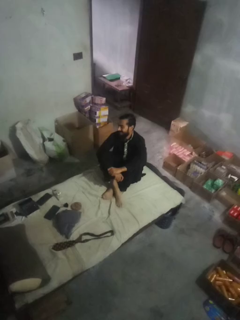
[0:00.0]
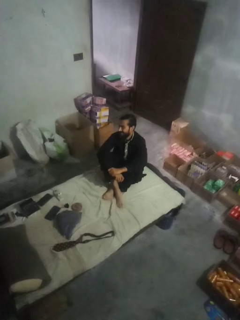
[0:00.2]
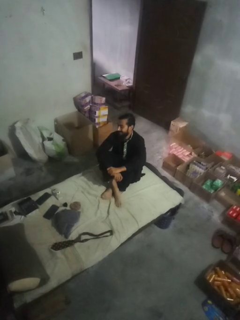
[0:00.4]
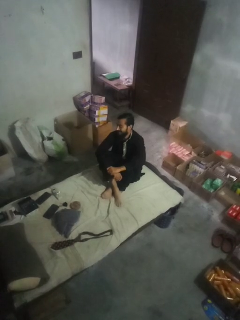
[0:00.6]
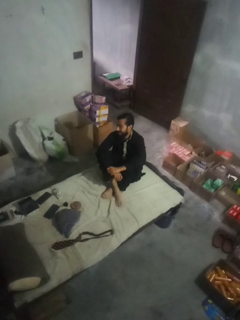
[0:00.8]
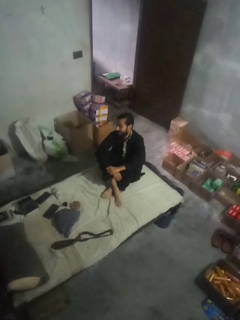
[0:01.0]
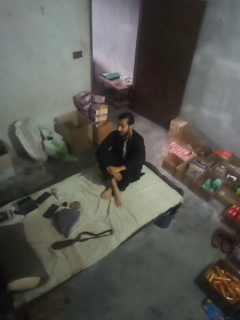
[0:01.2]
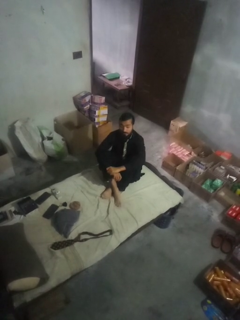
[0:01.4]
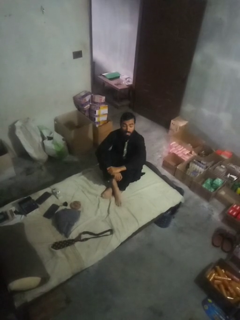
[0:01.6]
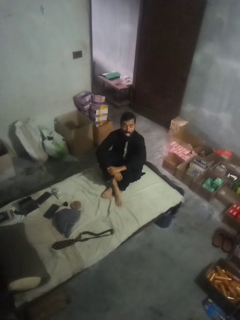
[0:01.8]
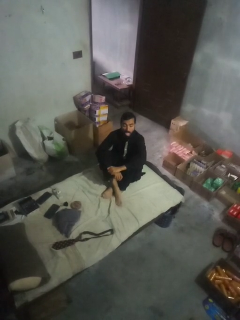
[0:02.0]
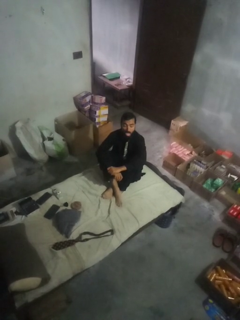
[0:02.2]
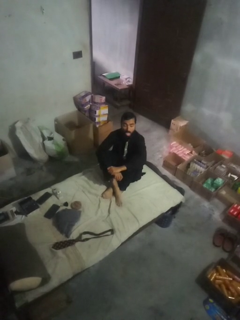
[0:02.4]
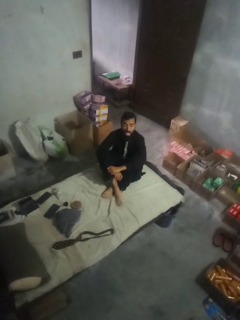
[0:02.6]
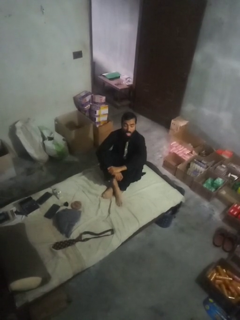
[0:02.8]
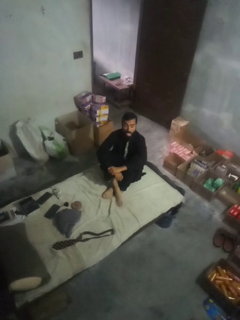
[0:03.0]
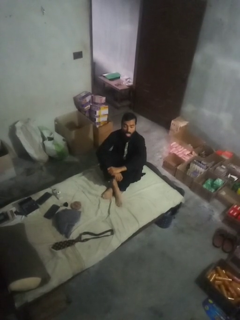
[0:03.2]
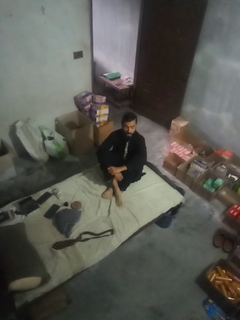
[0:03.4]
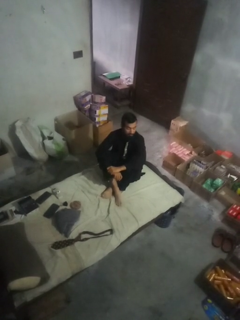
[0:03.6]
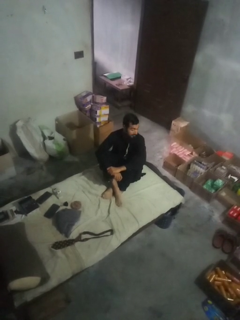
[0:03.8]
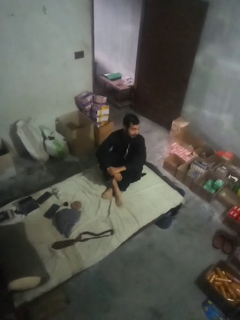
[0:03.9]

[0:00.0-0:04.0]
person sticks out tongue

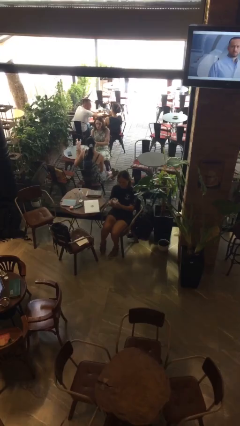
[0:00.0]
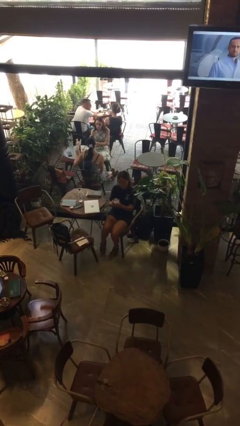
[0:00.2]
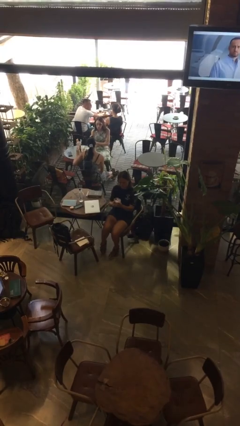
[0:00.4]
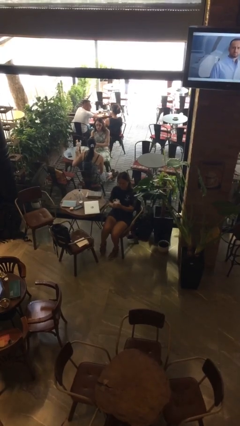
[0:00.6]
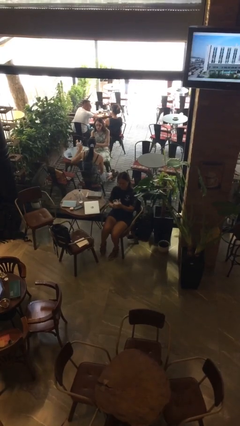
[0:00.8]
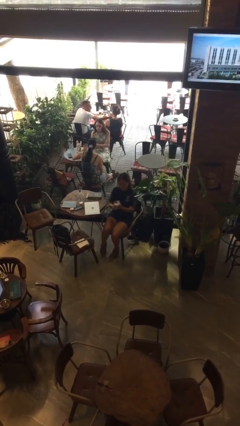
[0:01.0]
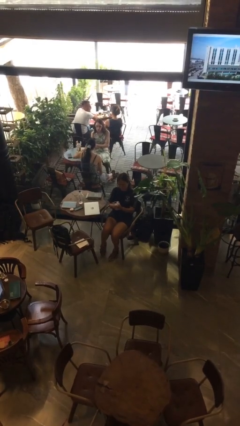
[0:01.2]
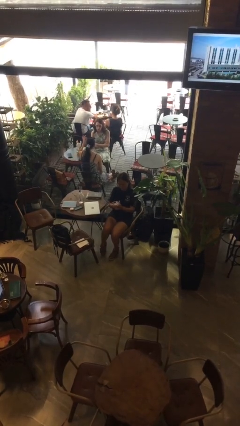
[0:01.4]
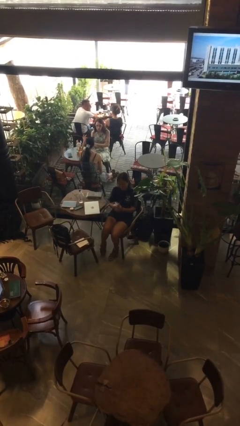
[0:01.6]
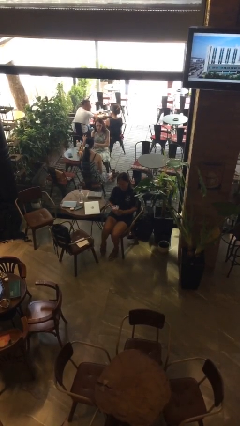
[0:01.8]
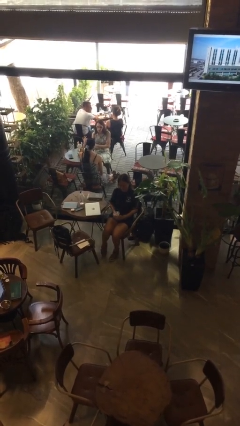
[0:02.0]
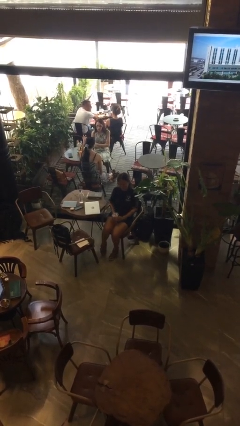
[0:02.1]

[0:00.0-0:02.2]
person squeezes object

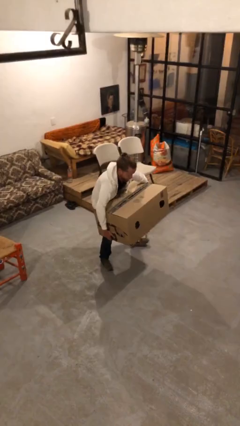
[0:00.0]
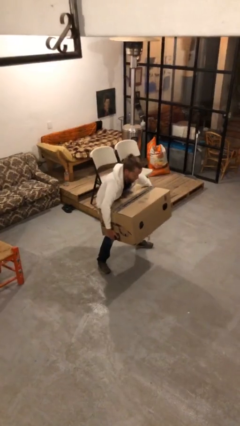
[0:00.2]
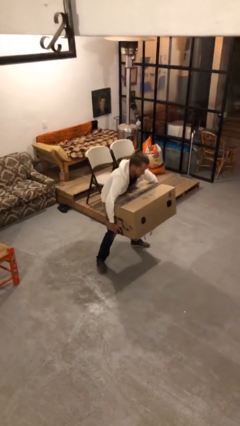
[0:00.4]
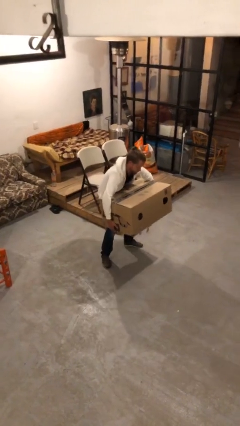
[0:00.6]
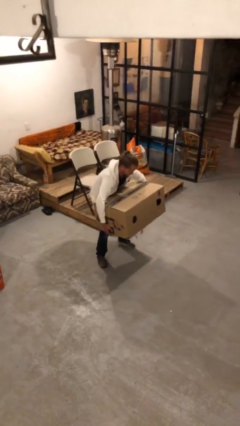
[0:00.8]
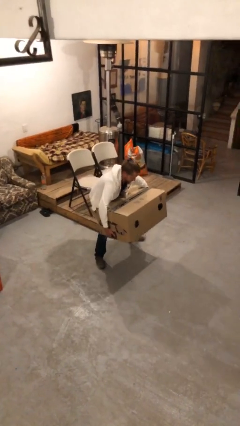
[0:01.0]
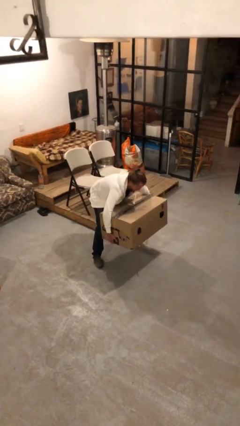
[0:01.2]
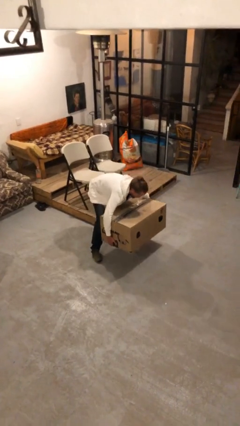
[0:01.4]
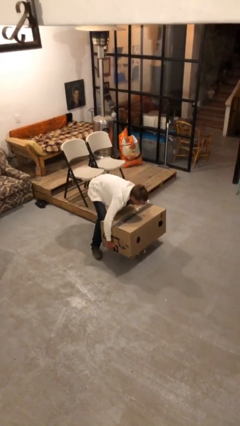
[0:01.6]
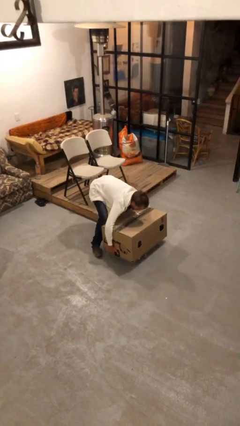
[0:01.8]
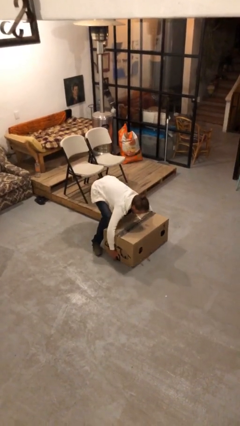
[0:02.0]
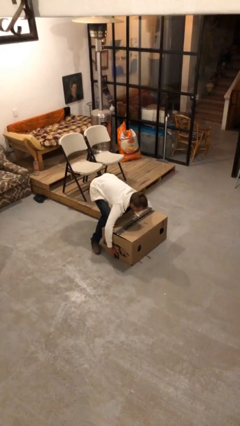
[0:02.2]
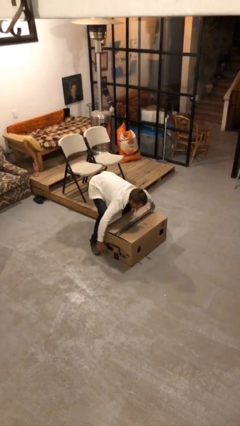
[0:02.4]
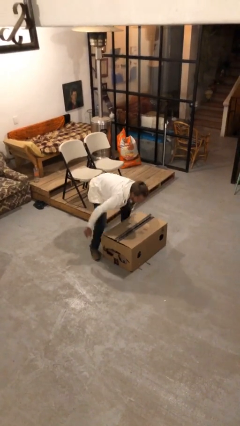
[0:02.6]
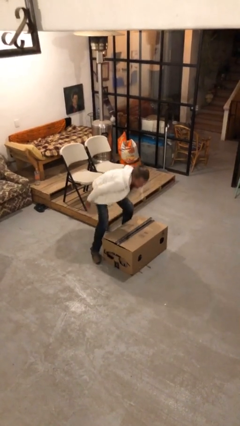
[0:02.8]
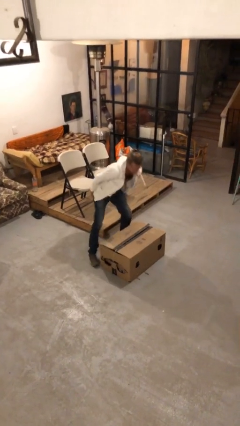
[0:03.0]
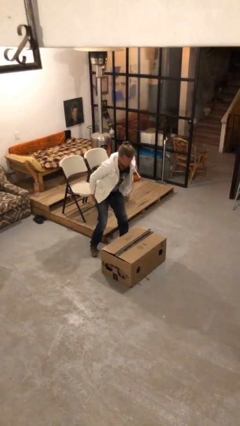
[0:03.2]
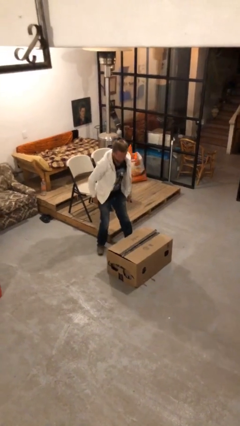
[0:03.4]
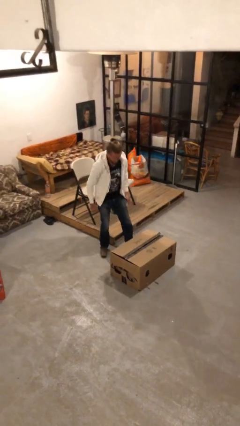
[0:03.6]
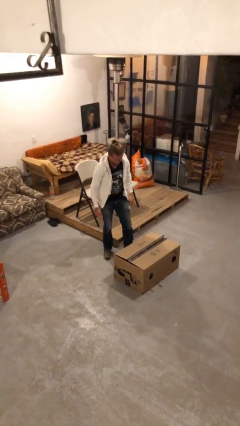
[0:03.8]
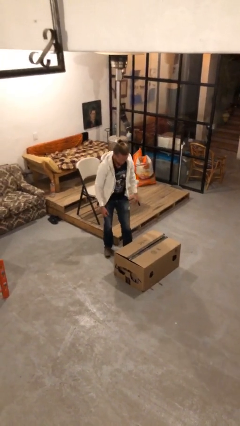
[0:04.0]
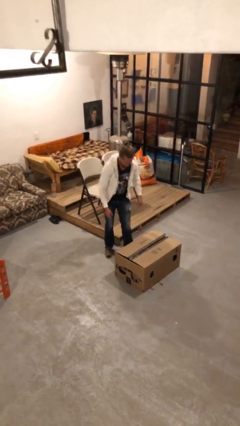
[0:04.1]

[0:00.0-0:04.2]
person puts down object on floor

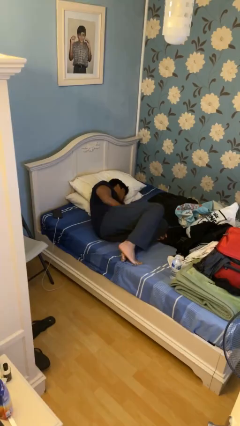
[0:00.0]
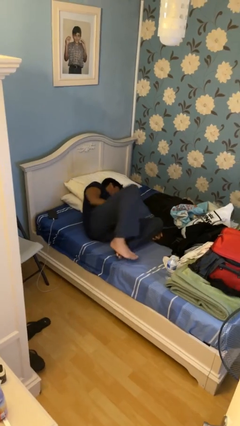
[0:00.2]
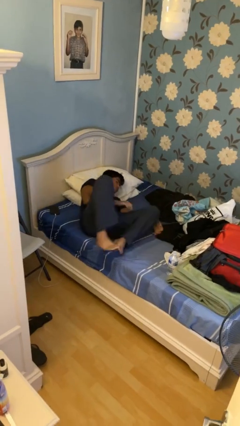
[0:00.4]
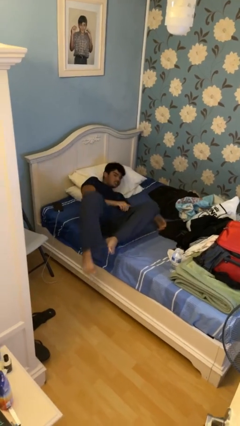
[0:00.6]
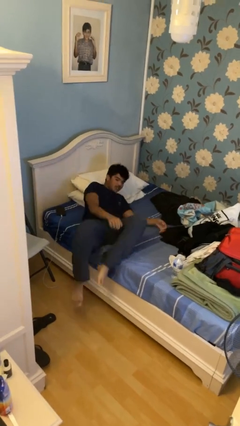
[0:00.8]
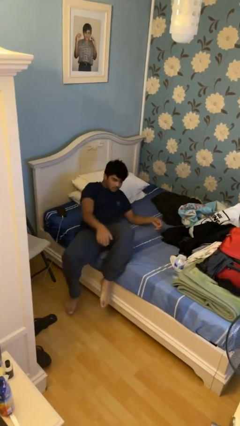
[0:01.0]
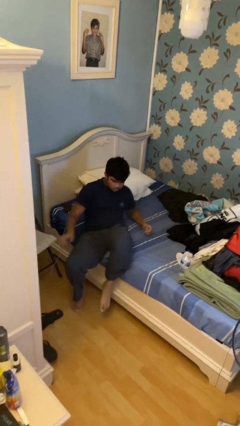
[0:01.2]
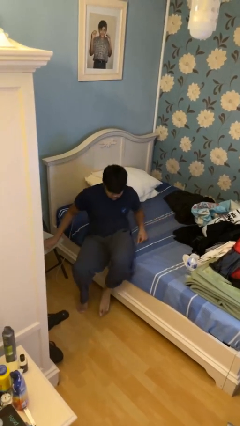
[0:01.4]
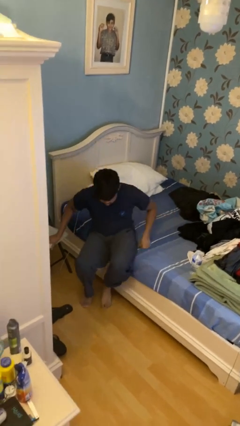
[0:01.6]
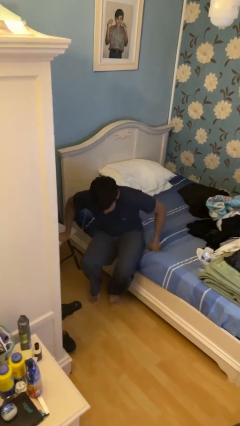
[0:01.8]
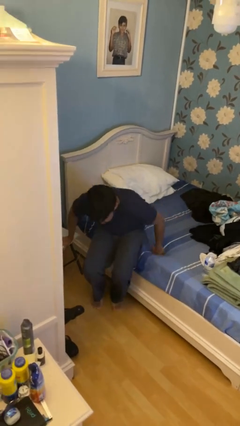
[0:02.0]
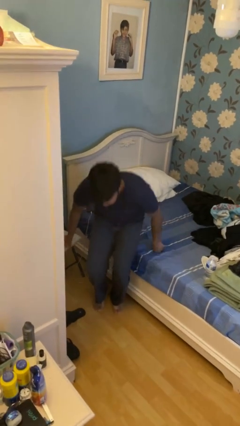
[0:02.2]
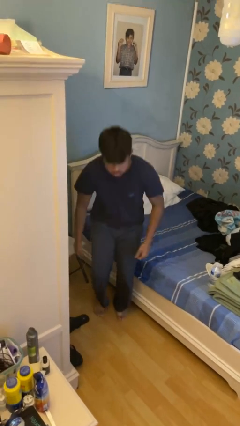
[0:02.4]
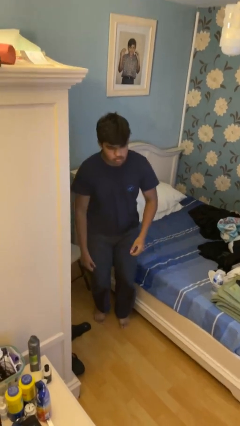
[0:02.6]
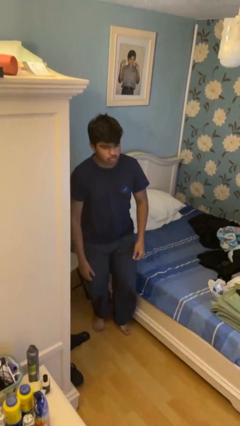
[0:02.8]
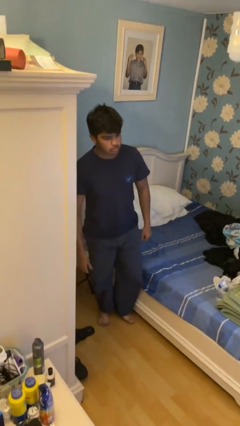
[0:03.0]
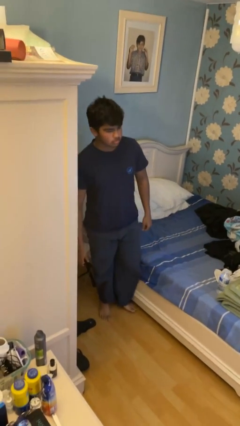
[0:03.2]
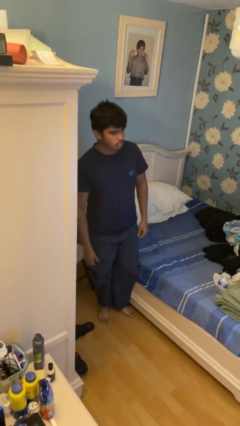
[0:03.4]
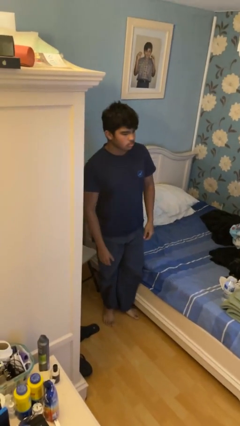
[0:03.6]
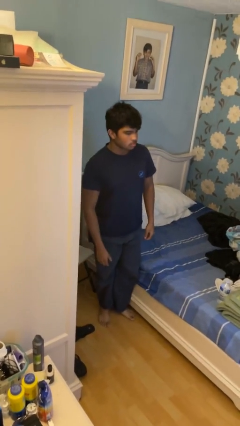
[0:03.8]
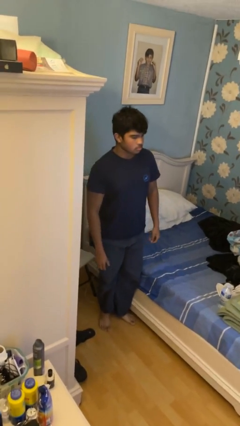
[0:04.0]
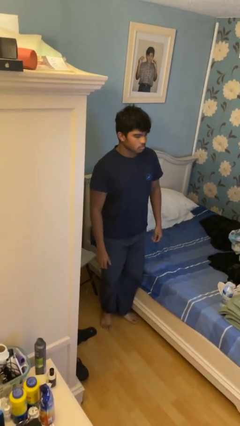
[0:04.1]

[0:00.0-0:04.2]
person stands up

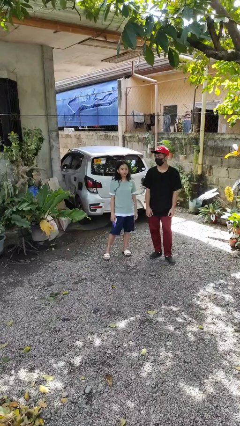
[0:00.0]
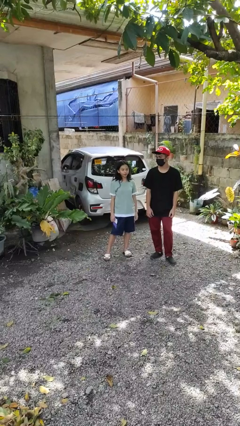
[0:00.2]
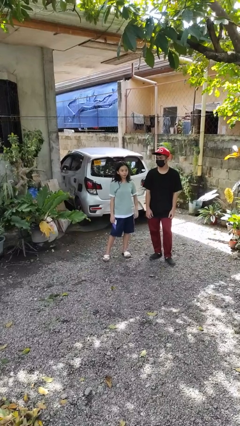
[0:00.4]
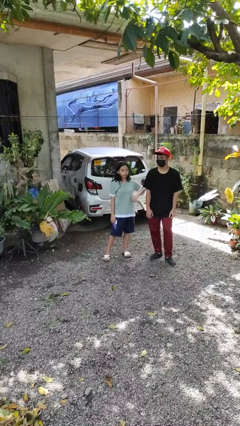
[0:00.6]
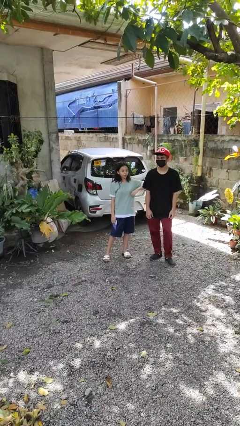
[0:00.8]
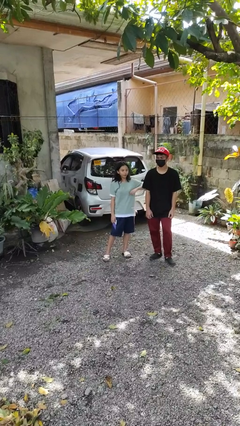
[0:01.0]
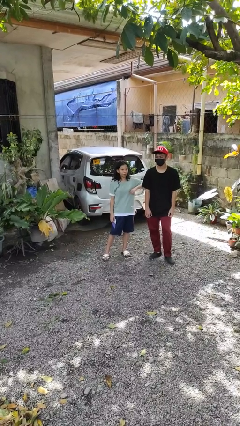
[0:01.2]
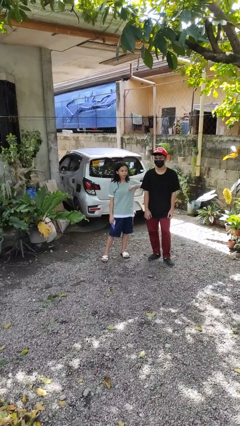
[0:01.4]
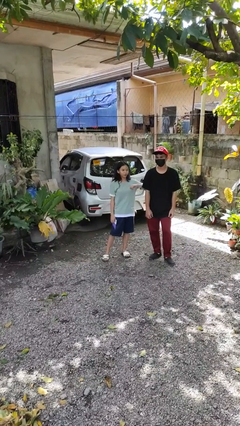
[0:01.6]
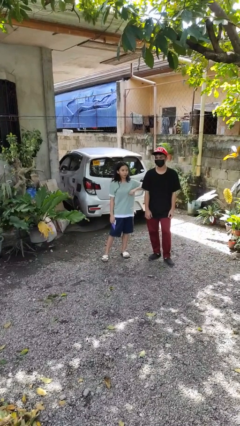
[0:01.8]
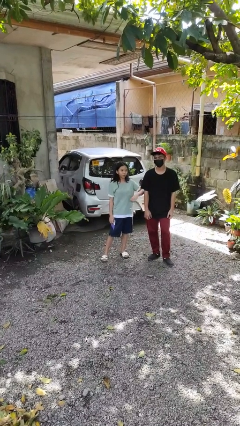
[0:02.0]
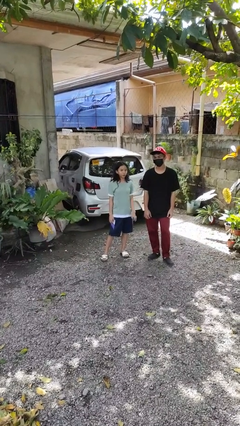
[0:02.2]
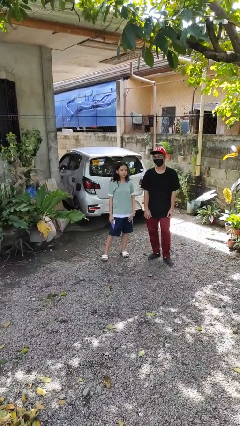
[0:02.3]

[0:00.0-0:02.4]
person nudges person with elbow

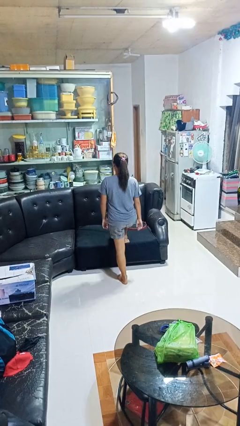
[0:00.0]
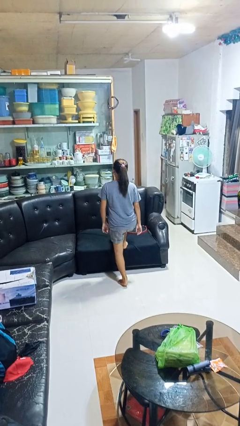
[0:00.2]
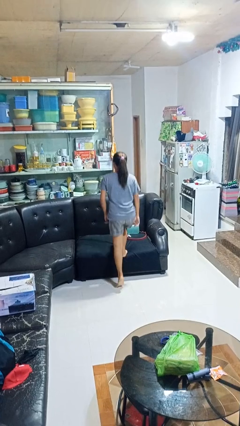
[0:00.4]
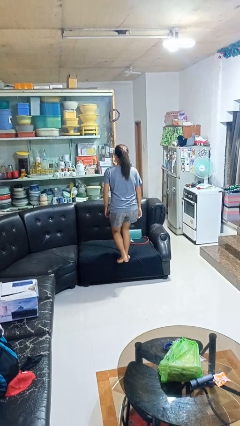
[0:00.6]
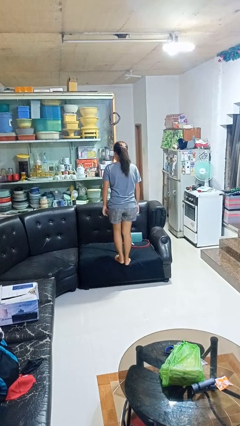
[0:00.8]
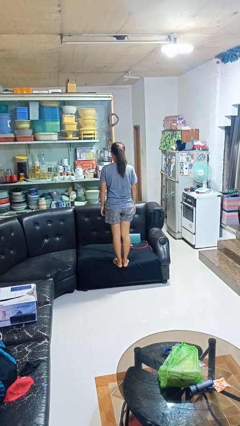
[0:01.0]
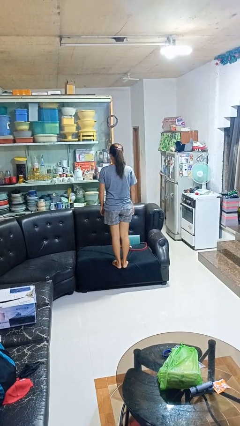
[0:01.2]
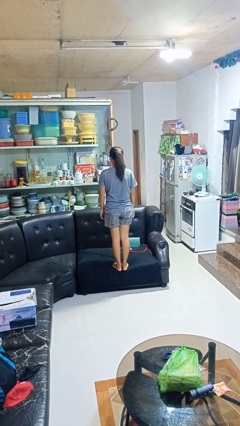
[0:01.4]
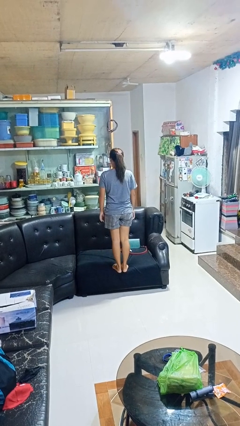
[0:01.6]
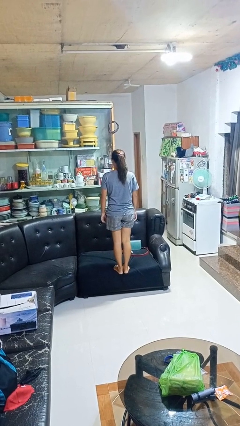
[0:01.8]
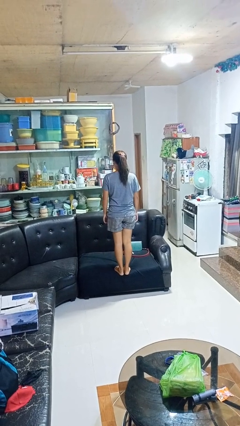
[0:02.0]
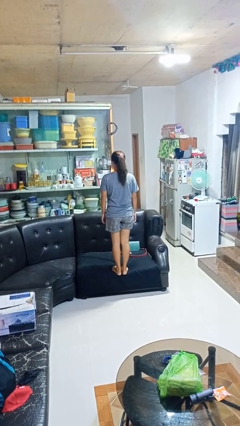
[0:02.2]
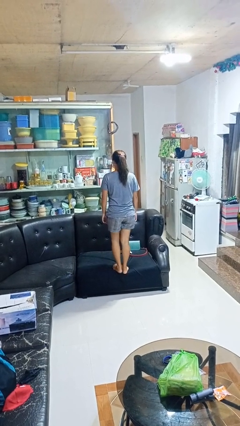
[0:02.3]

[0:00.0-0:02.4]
person climbs on couch
